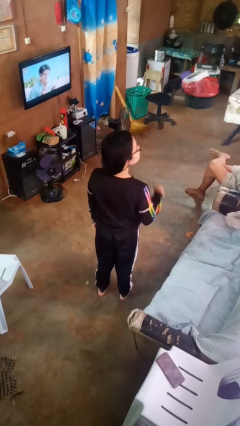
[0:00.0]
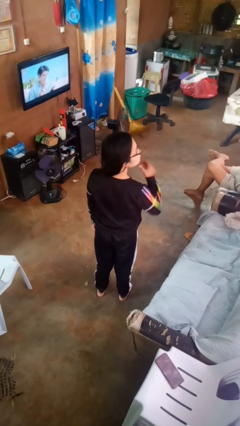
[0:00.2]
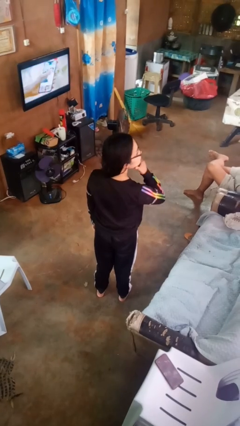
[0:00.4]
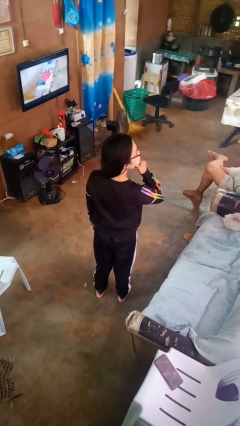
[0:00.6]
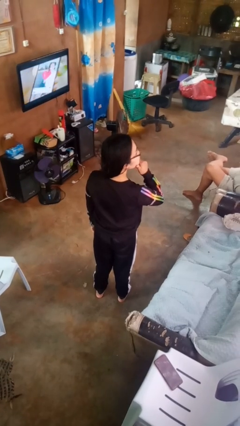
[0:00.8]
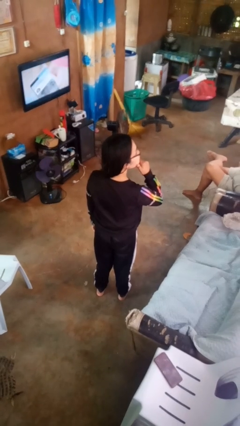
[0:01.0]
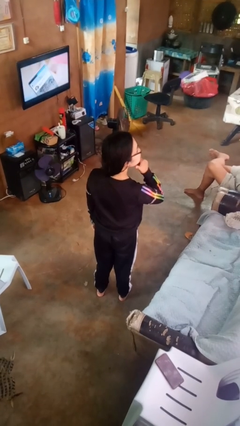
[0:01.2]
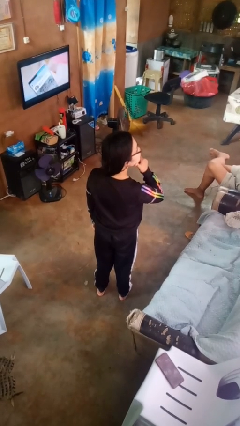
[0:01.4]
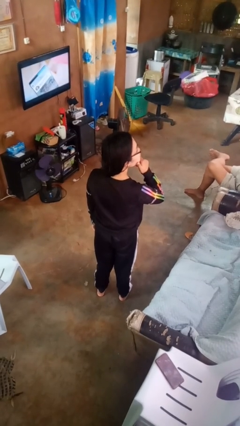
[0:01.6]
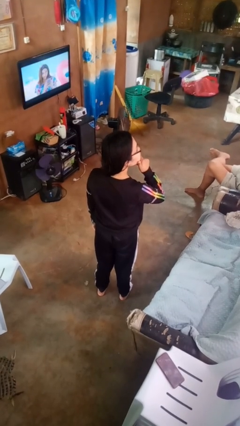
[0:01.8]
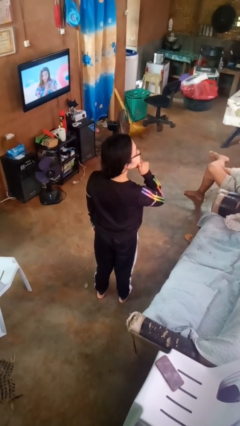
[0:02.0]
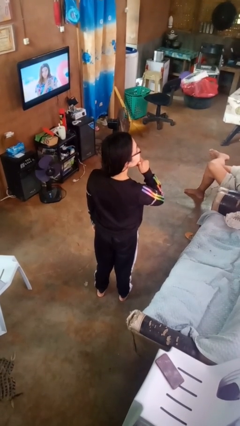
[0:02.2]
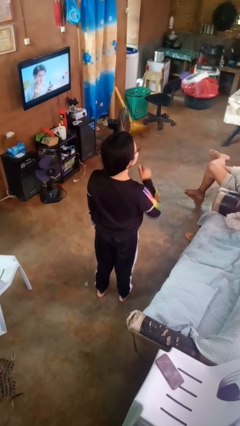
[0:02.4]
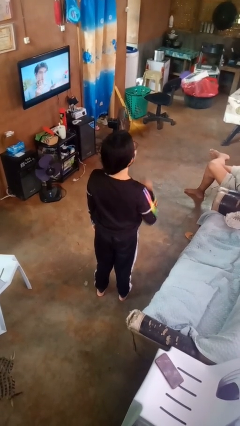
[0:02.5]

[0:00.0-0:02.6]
person strokes chin

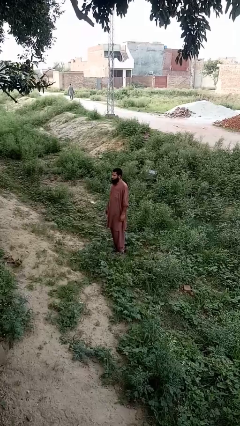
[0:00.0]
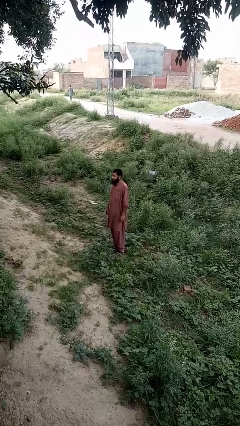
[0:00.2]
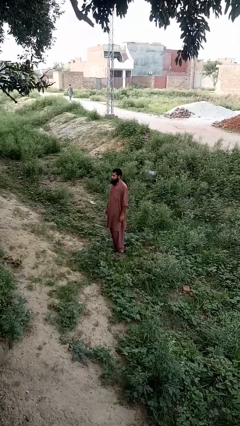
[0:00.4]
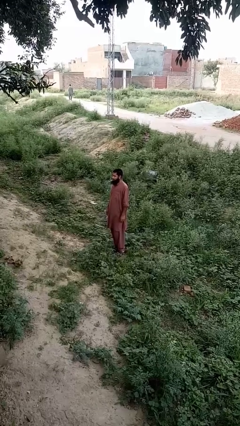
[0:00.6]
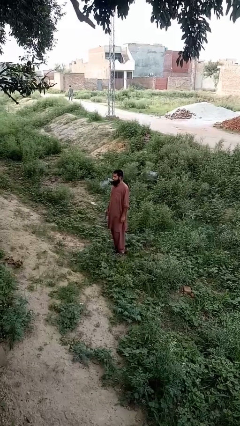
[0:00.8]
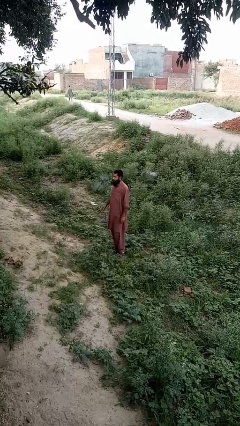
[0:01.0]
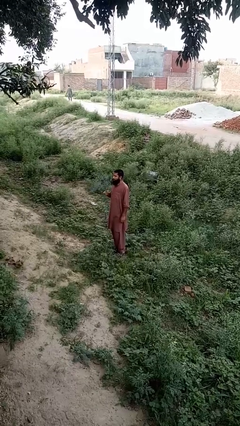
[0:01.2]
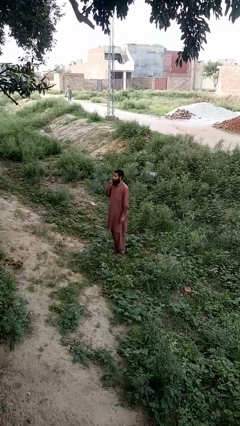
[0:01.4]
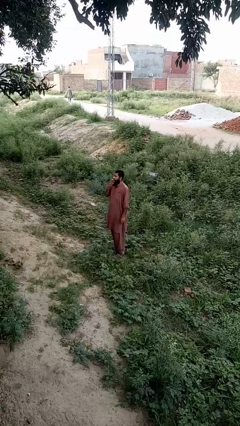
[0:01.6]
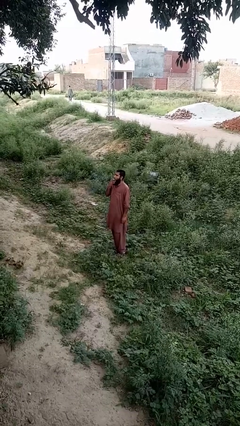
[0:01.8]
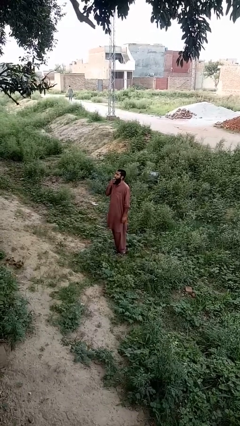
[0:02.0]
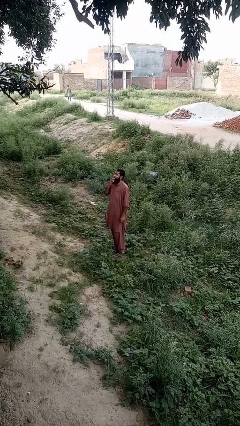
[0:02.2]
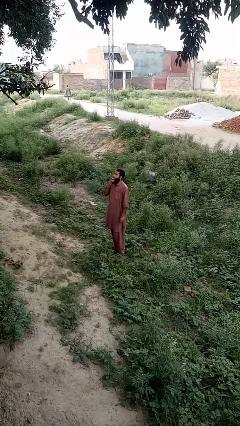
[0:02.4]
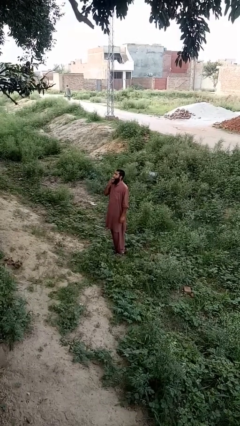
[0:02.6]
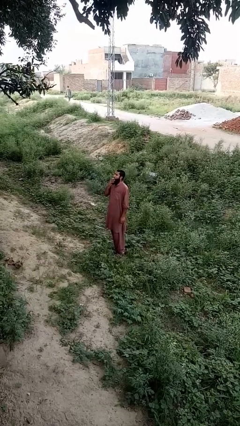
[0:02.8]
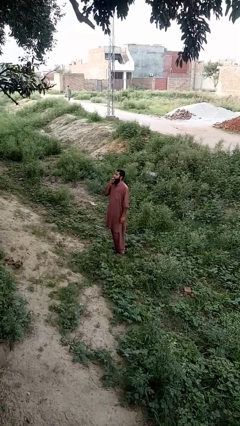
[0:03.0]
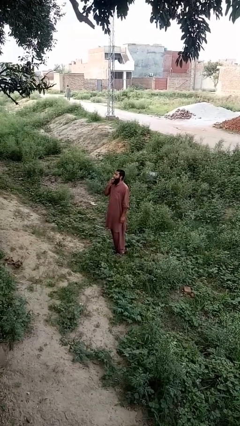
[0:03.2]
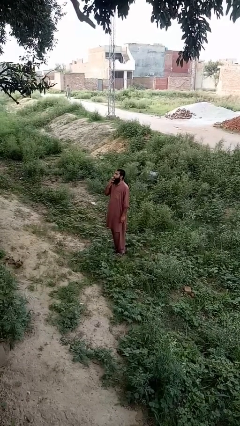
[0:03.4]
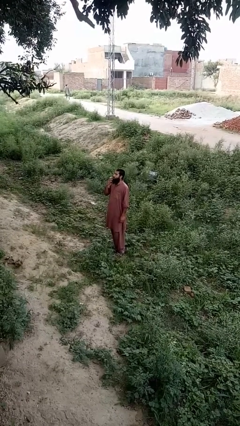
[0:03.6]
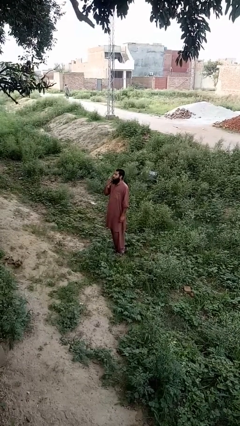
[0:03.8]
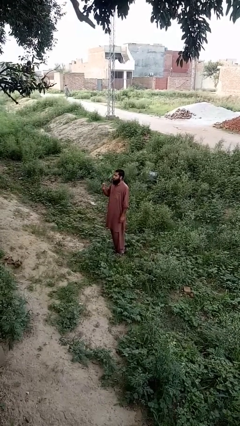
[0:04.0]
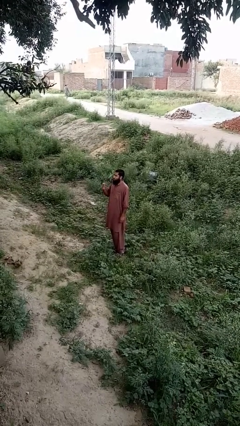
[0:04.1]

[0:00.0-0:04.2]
person vapes

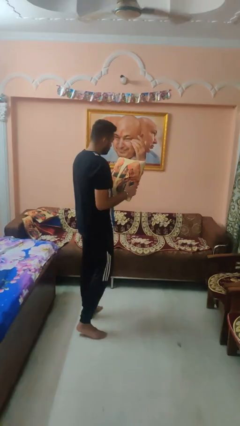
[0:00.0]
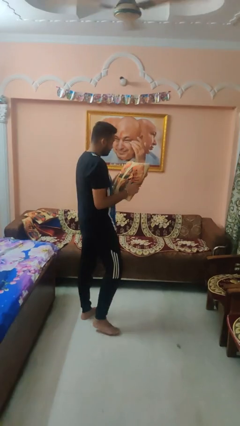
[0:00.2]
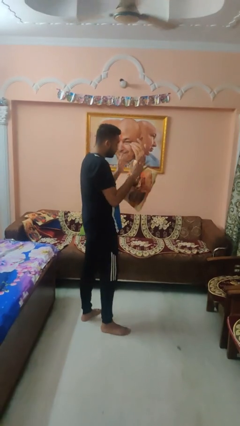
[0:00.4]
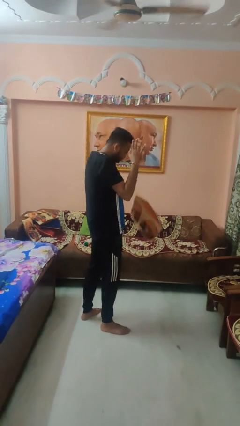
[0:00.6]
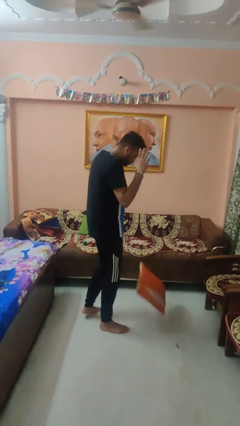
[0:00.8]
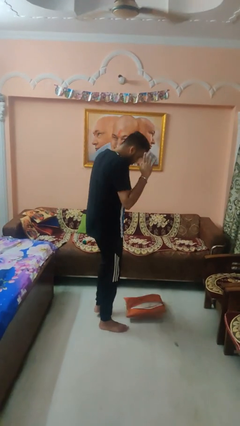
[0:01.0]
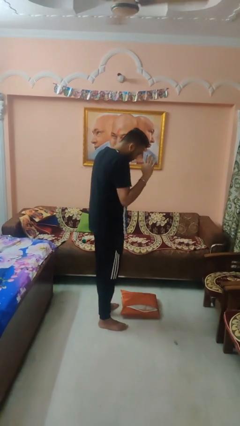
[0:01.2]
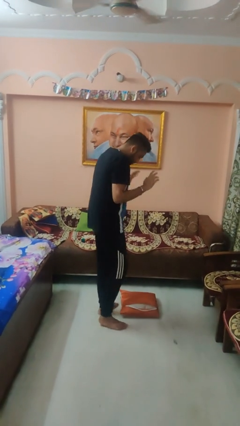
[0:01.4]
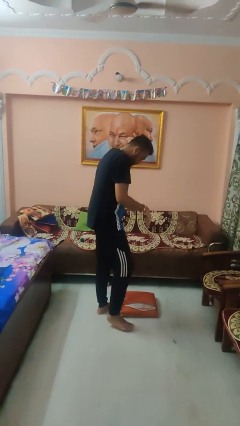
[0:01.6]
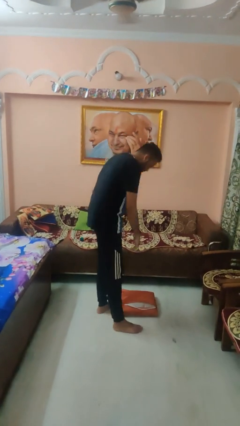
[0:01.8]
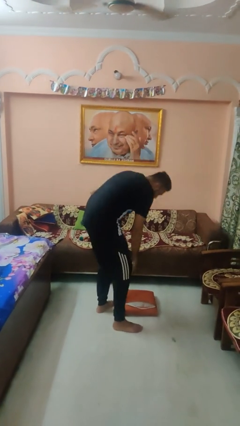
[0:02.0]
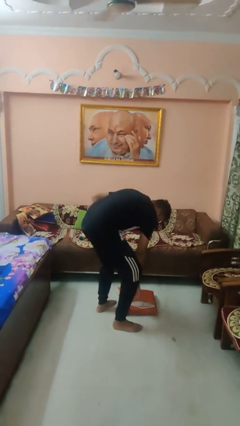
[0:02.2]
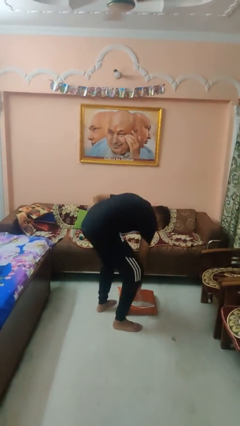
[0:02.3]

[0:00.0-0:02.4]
person drops object

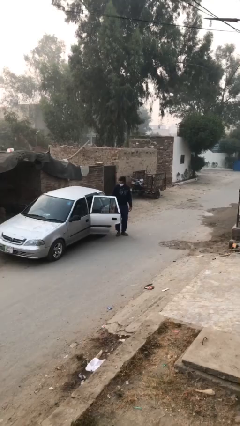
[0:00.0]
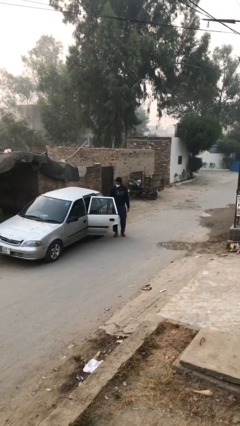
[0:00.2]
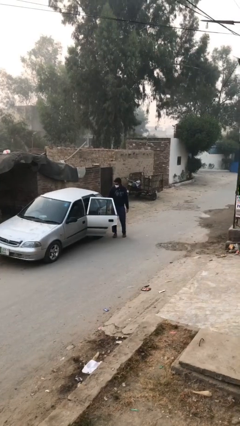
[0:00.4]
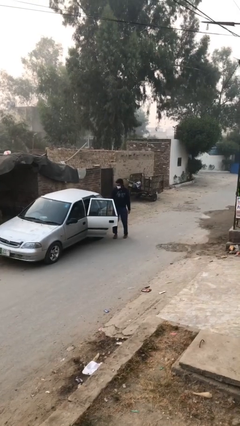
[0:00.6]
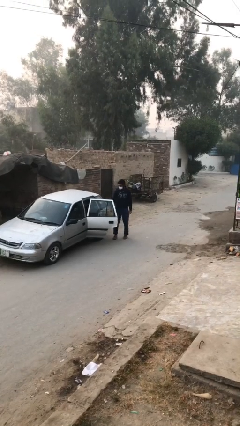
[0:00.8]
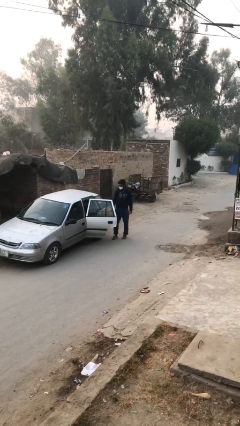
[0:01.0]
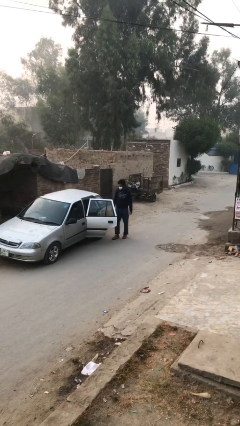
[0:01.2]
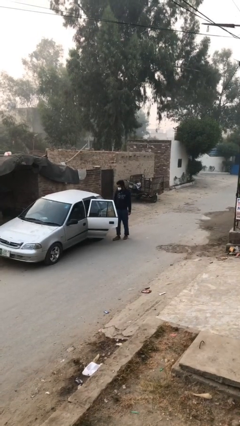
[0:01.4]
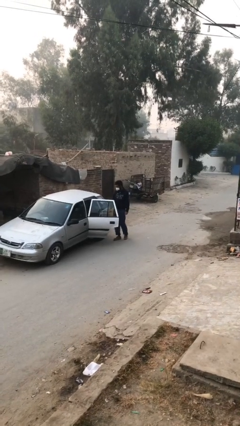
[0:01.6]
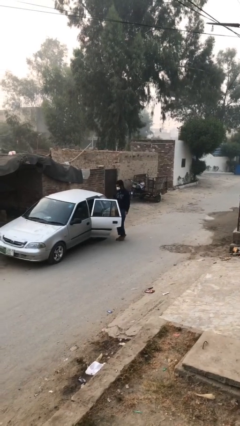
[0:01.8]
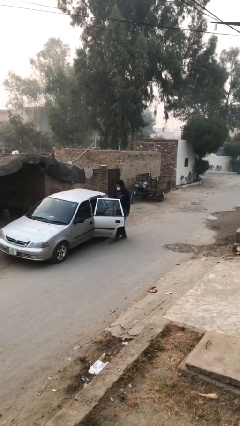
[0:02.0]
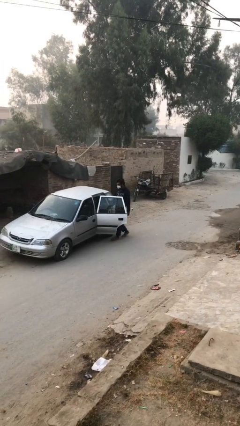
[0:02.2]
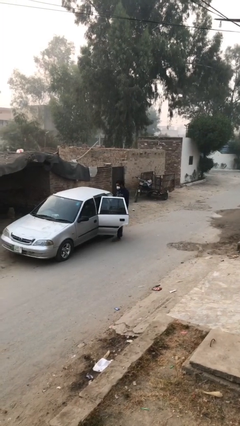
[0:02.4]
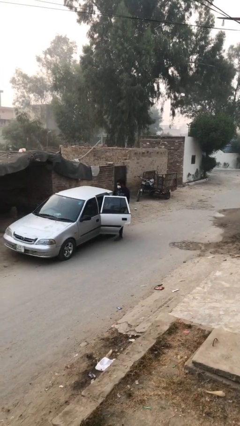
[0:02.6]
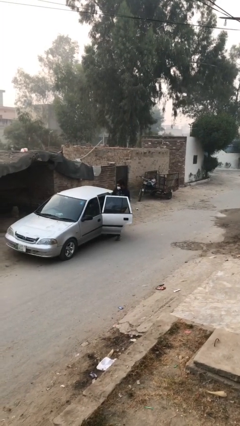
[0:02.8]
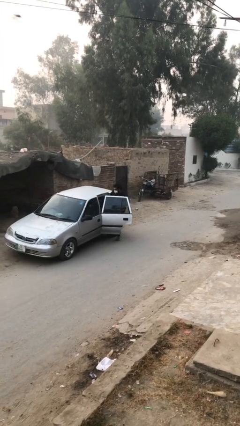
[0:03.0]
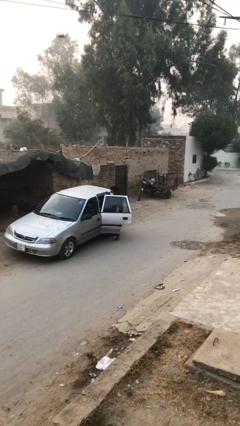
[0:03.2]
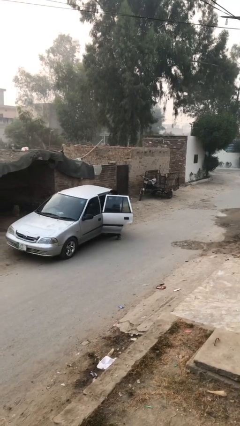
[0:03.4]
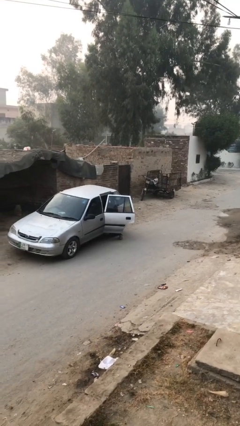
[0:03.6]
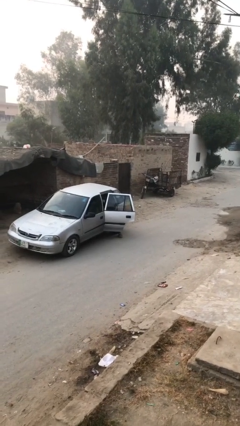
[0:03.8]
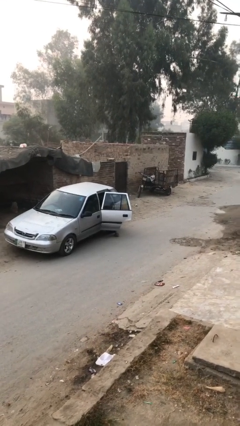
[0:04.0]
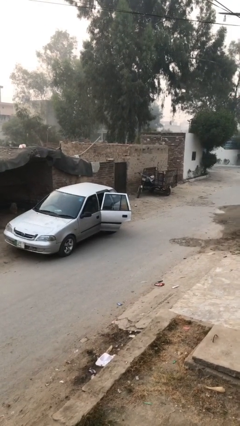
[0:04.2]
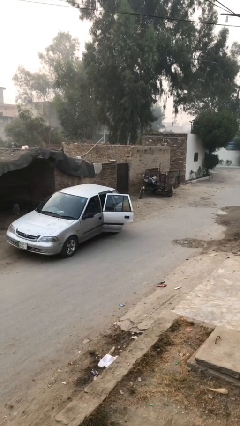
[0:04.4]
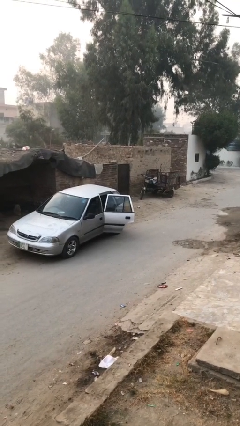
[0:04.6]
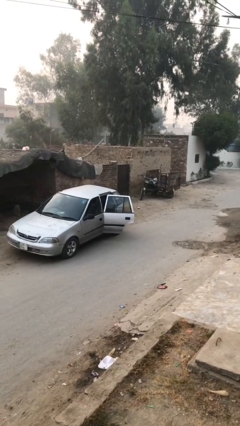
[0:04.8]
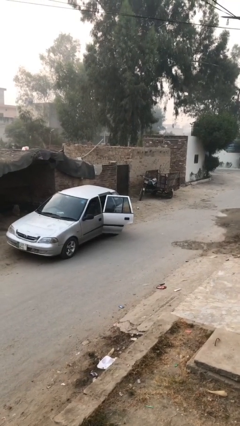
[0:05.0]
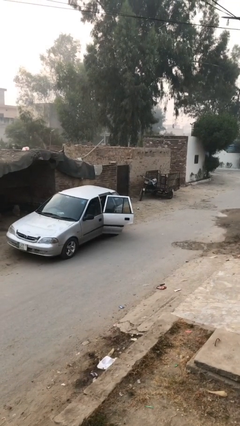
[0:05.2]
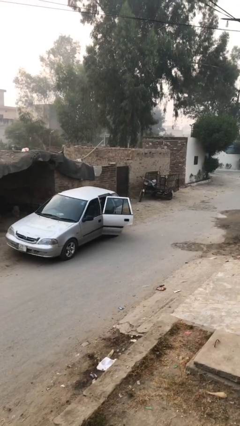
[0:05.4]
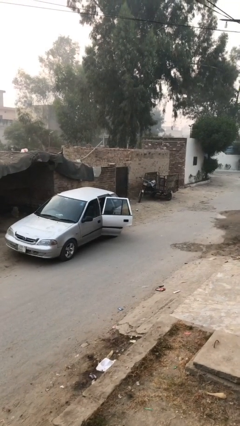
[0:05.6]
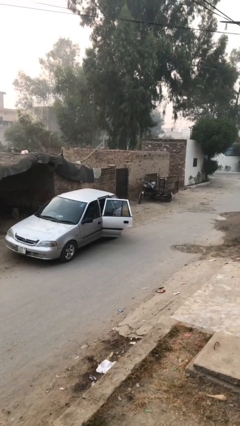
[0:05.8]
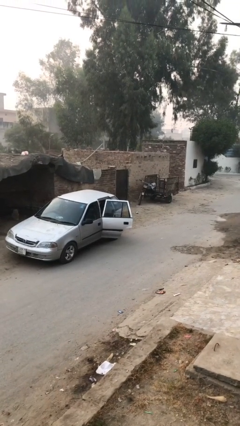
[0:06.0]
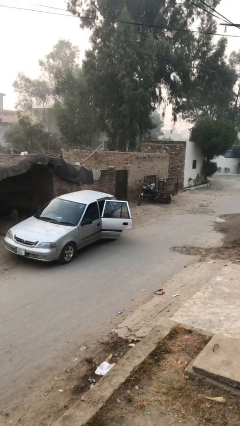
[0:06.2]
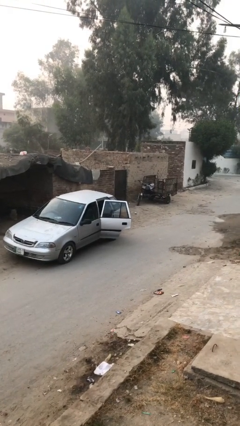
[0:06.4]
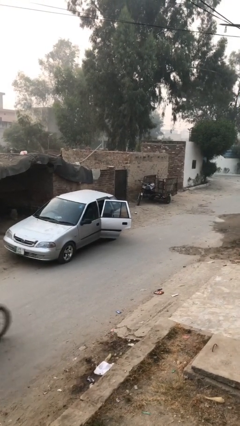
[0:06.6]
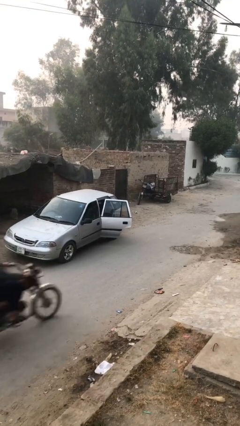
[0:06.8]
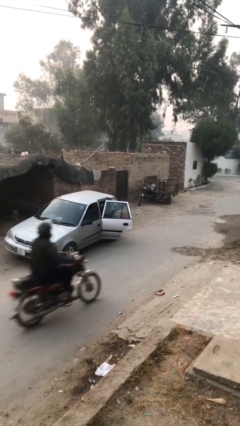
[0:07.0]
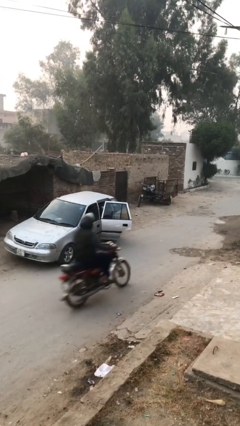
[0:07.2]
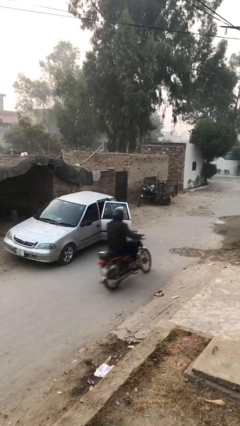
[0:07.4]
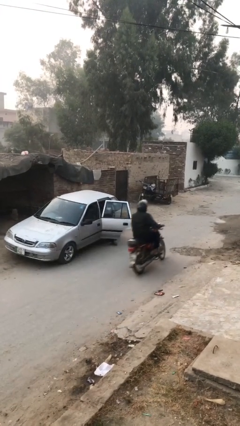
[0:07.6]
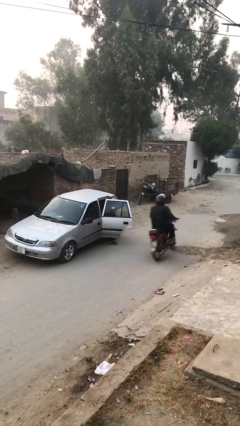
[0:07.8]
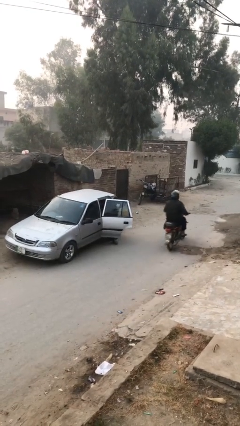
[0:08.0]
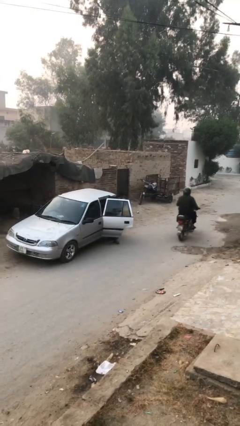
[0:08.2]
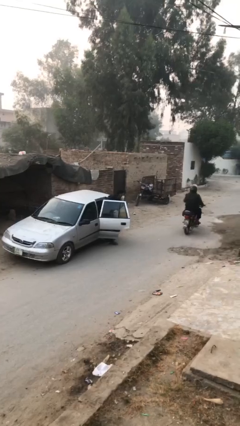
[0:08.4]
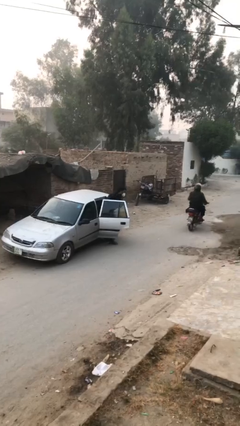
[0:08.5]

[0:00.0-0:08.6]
person enters car

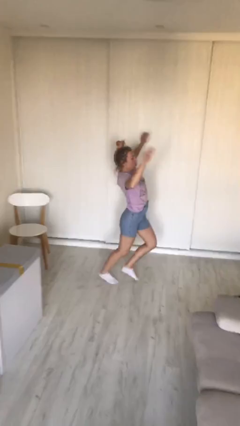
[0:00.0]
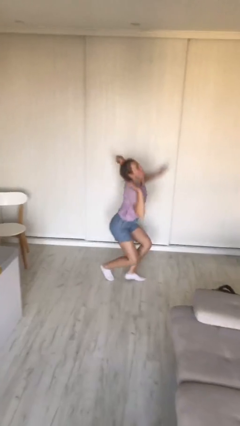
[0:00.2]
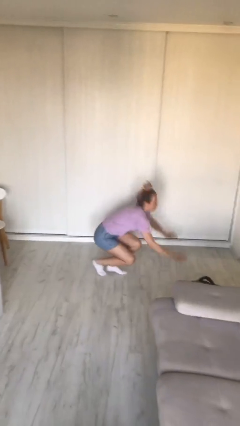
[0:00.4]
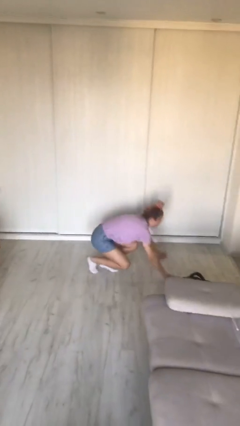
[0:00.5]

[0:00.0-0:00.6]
person trips on object on floor
